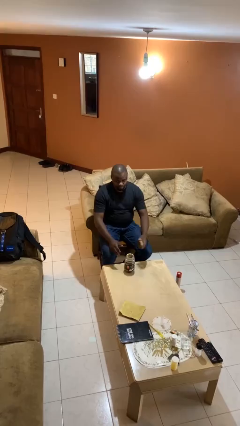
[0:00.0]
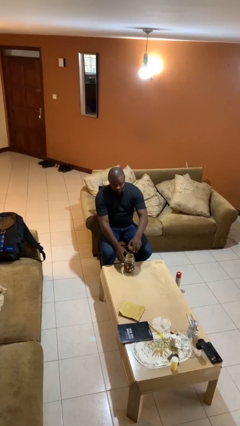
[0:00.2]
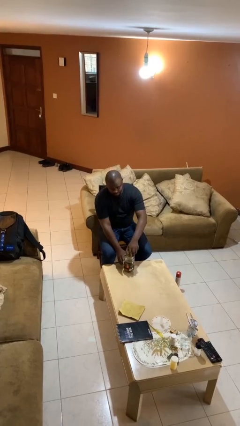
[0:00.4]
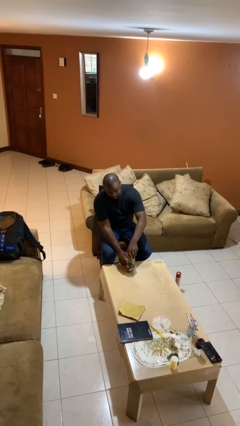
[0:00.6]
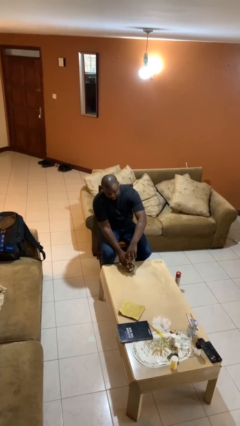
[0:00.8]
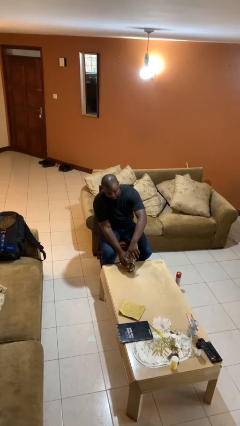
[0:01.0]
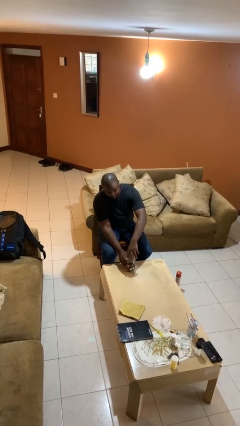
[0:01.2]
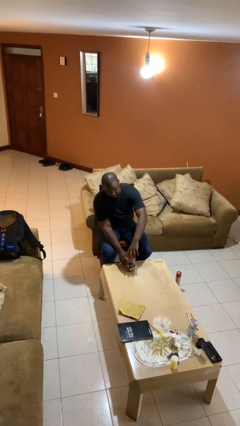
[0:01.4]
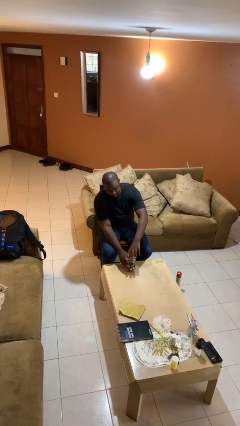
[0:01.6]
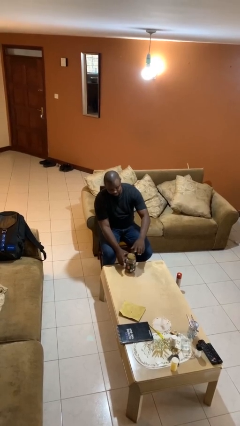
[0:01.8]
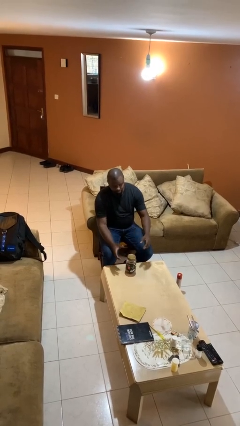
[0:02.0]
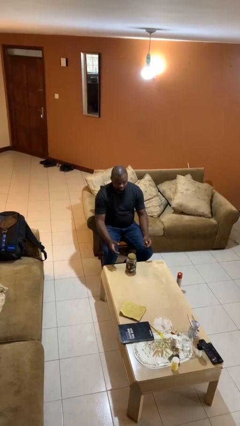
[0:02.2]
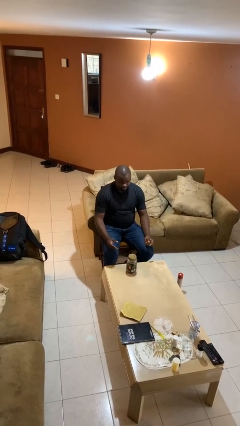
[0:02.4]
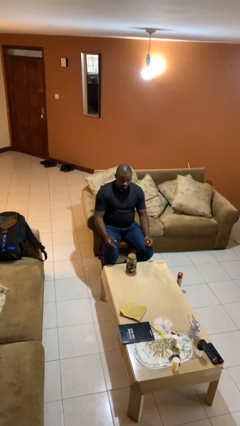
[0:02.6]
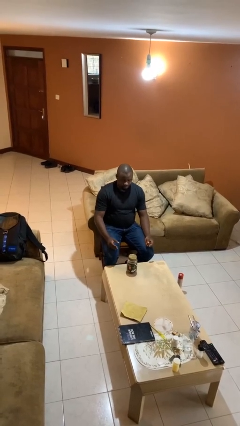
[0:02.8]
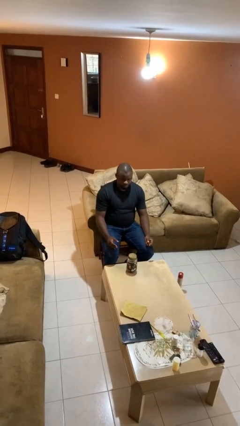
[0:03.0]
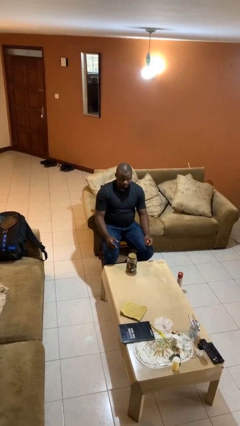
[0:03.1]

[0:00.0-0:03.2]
person closes jar

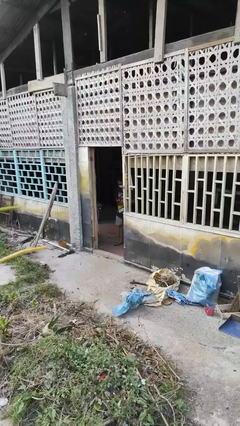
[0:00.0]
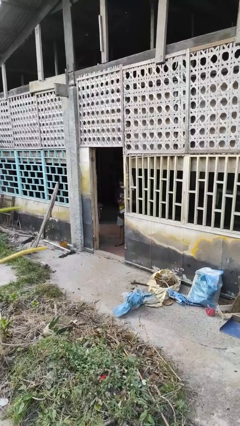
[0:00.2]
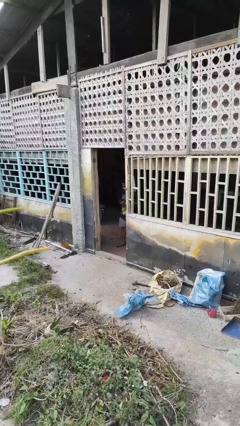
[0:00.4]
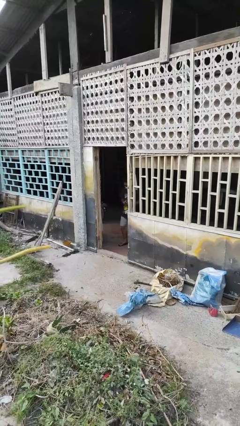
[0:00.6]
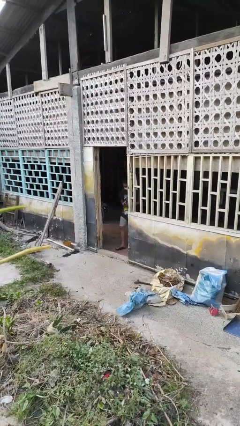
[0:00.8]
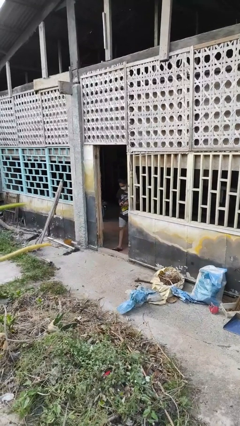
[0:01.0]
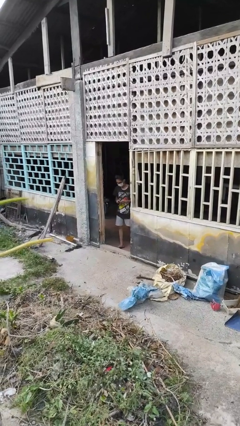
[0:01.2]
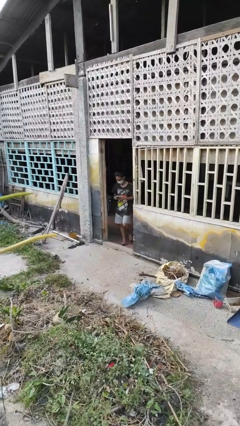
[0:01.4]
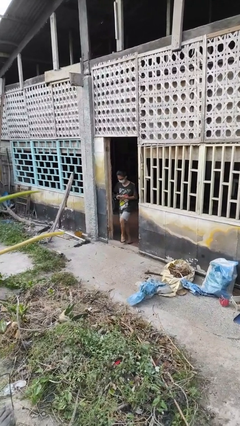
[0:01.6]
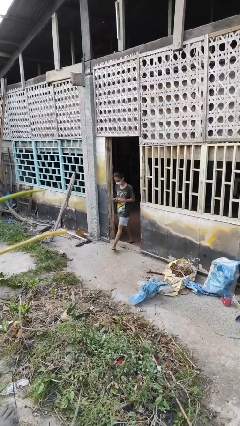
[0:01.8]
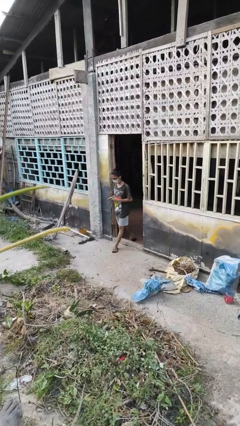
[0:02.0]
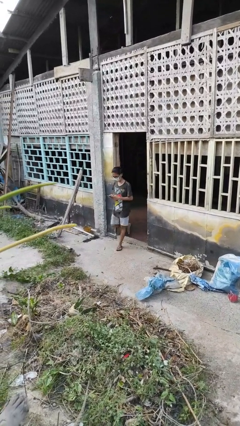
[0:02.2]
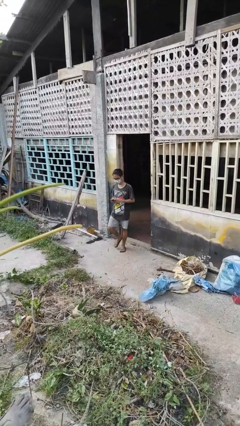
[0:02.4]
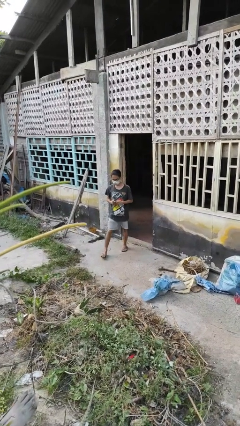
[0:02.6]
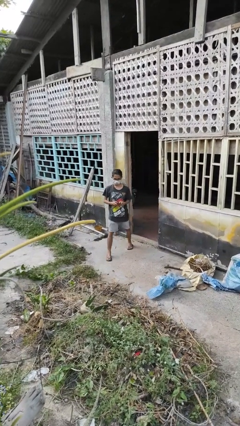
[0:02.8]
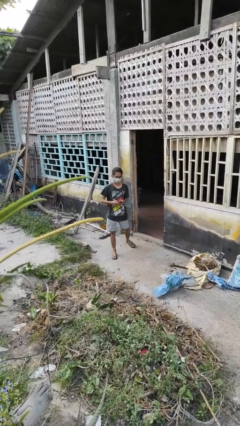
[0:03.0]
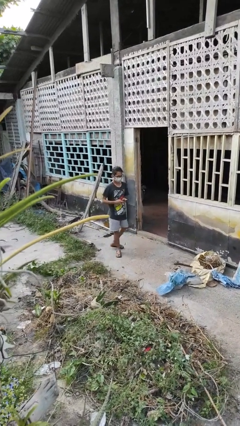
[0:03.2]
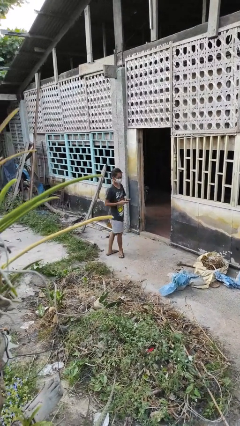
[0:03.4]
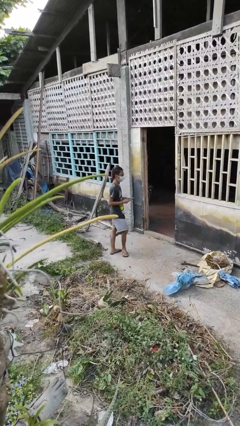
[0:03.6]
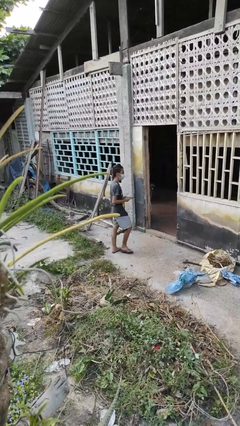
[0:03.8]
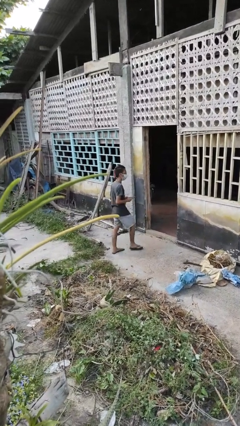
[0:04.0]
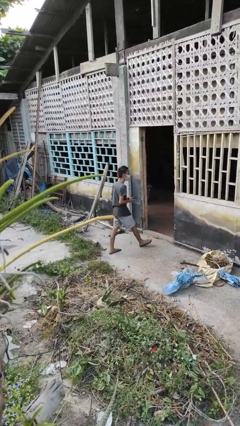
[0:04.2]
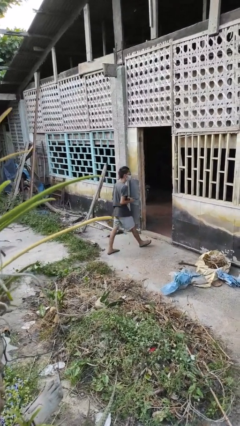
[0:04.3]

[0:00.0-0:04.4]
person enters scene through structure

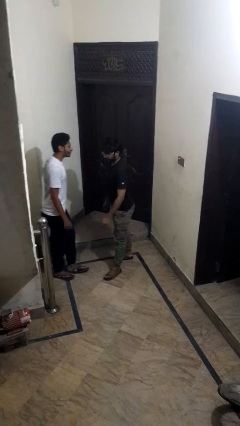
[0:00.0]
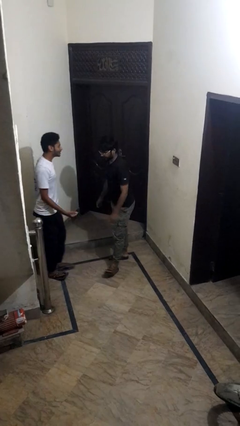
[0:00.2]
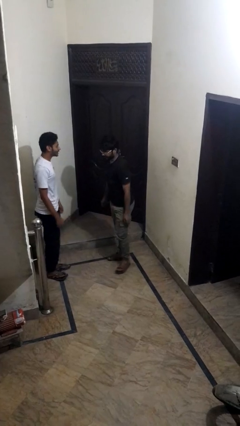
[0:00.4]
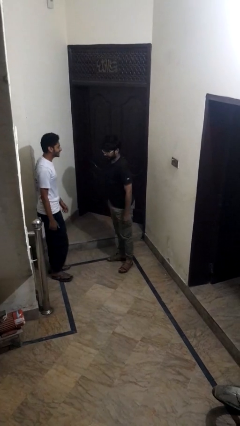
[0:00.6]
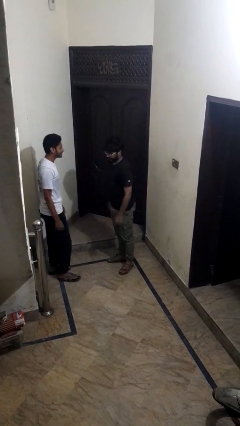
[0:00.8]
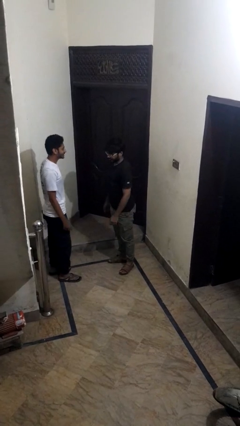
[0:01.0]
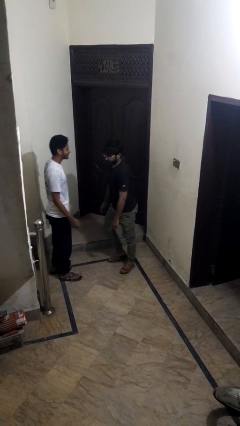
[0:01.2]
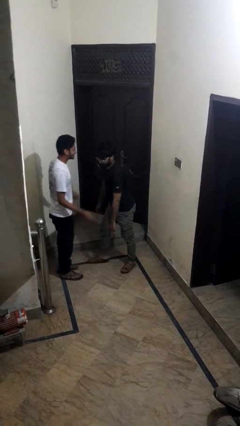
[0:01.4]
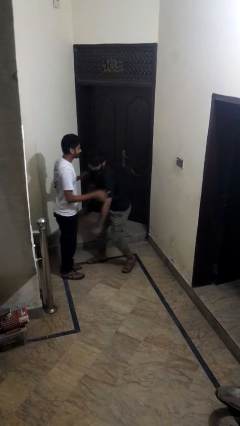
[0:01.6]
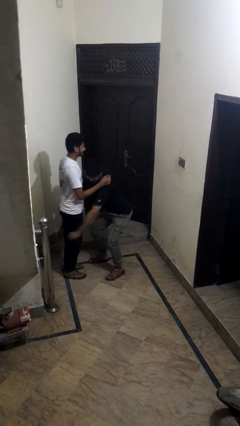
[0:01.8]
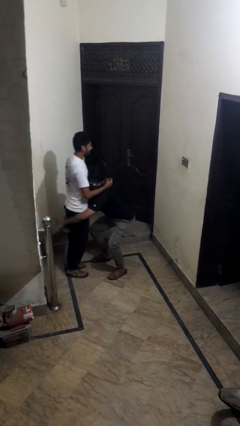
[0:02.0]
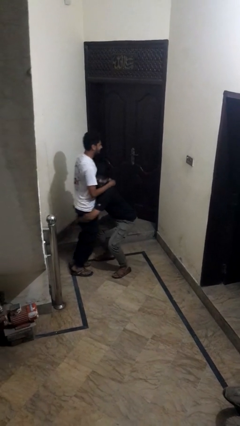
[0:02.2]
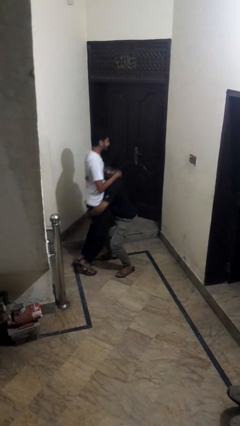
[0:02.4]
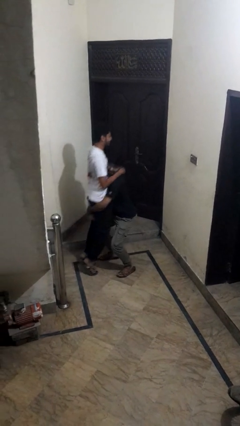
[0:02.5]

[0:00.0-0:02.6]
person puts on hat

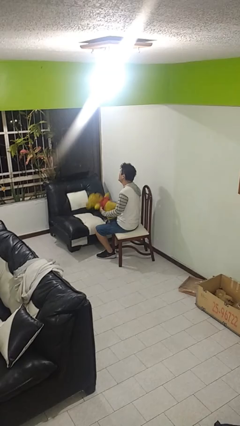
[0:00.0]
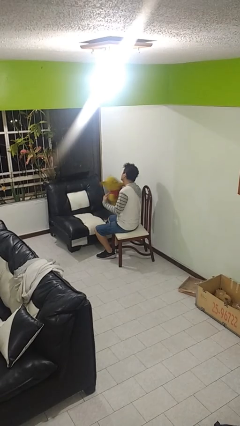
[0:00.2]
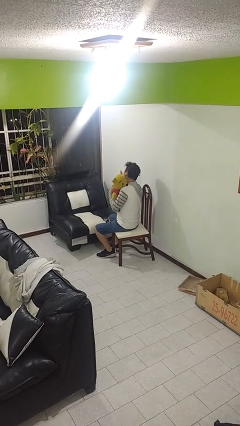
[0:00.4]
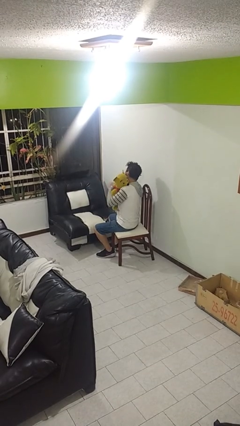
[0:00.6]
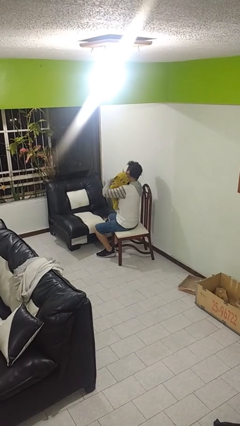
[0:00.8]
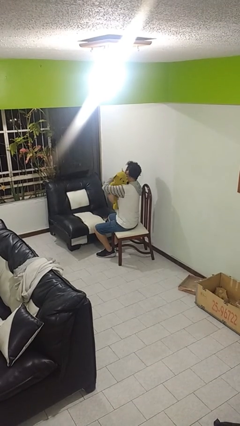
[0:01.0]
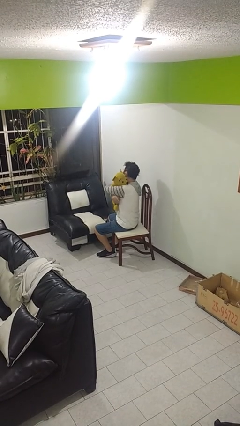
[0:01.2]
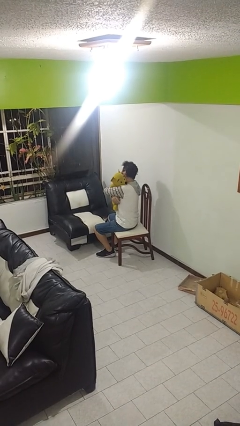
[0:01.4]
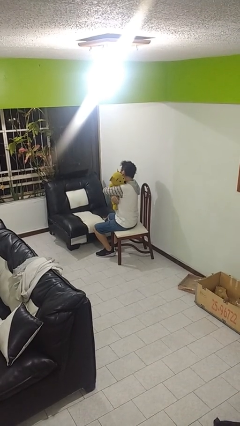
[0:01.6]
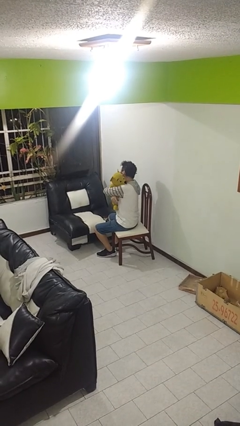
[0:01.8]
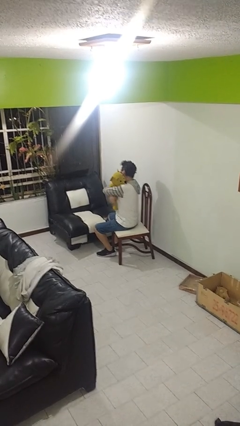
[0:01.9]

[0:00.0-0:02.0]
person hugs stuffed animal

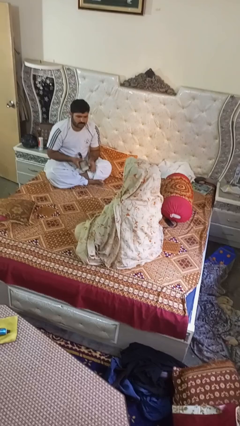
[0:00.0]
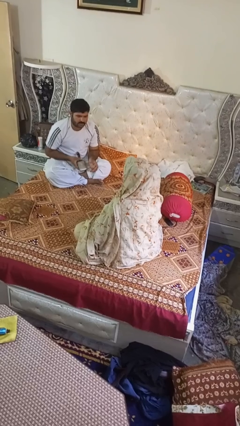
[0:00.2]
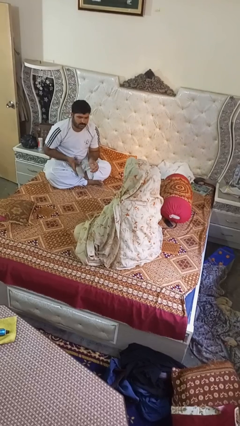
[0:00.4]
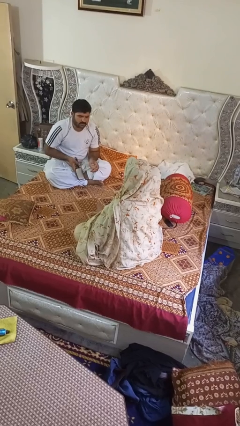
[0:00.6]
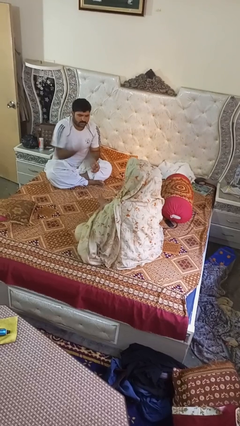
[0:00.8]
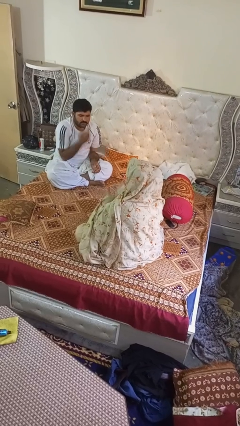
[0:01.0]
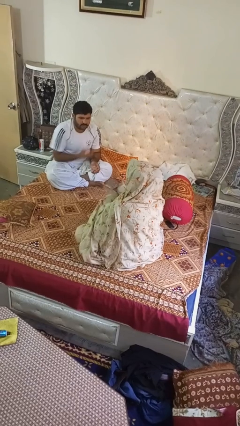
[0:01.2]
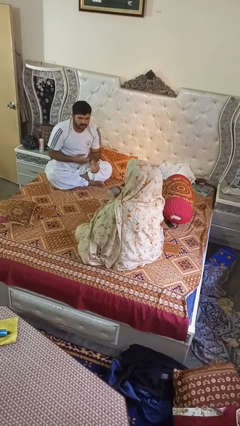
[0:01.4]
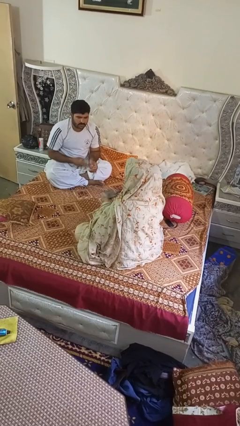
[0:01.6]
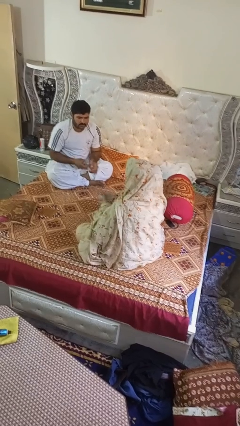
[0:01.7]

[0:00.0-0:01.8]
person catches object from person

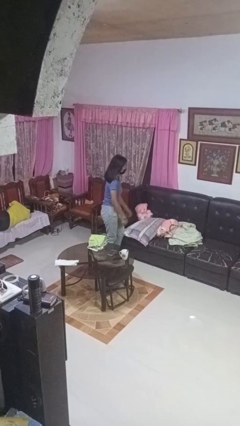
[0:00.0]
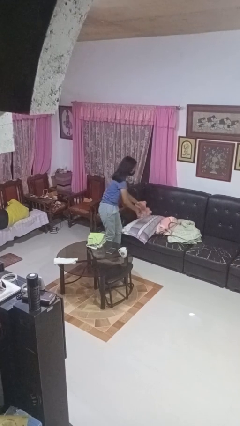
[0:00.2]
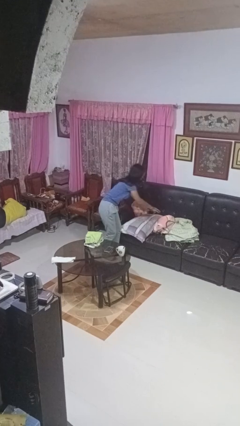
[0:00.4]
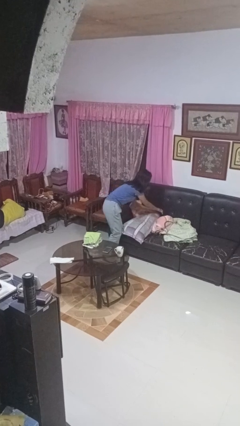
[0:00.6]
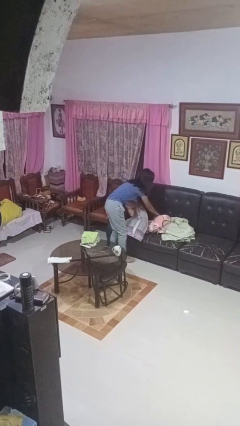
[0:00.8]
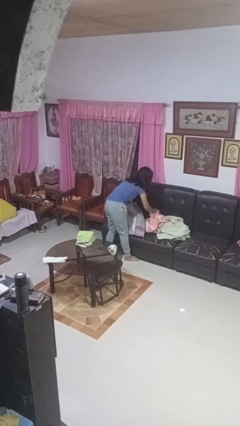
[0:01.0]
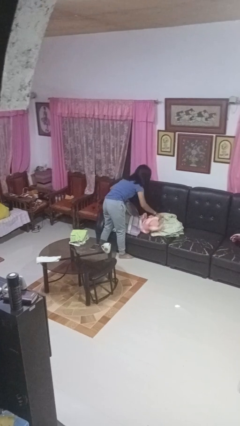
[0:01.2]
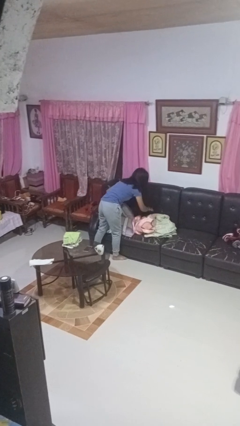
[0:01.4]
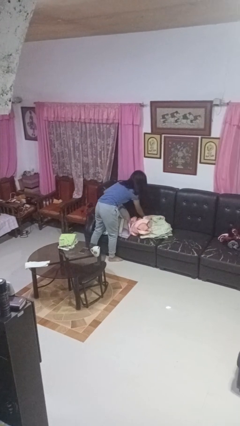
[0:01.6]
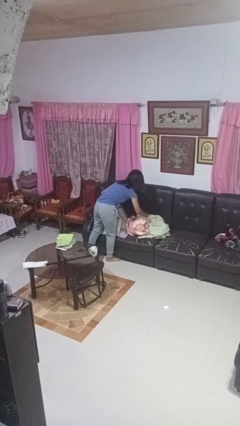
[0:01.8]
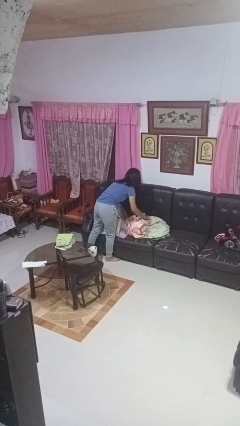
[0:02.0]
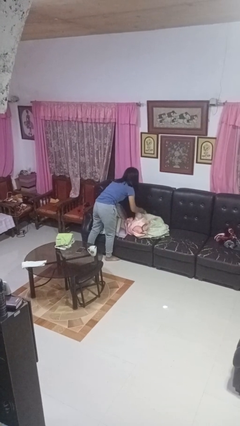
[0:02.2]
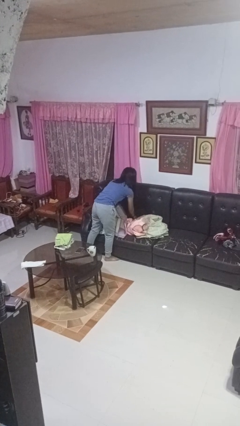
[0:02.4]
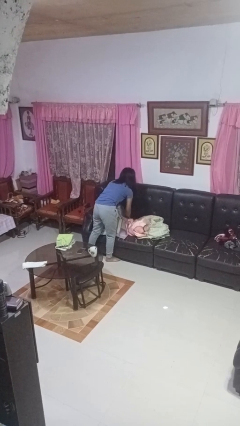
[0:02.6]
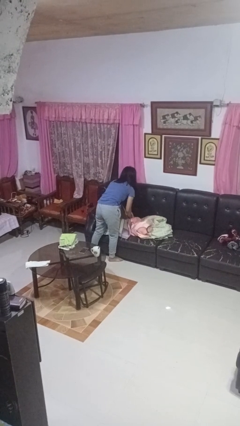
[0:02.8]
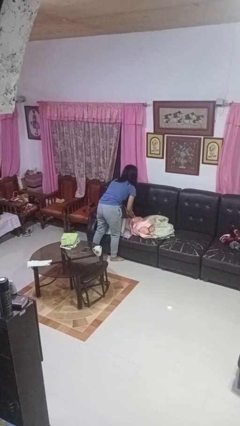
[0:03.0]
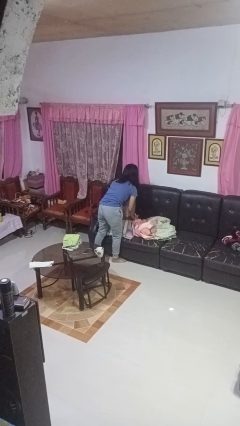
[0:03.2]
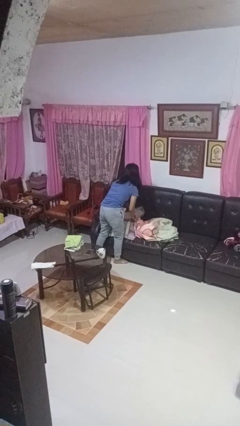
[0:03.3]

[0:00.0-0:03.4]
person searches in couch
